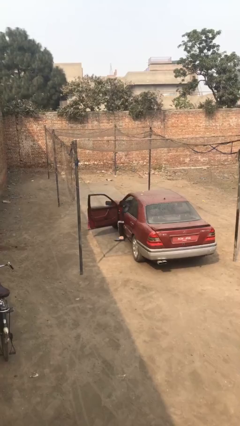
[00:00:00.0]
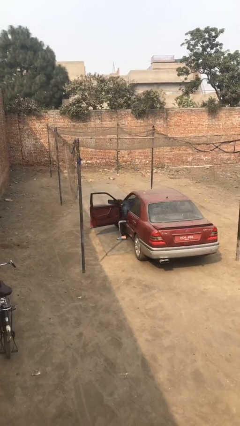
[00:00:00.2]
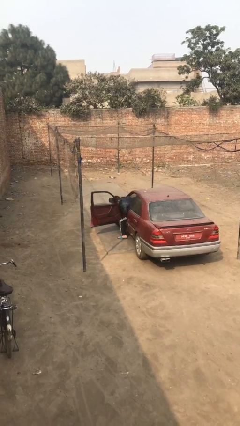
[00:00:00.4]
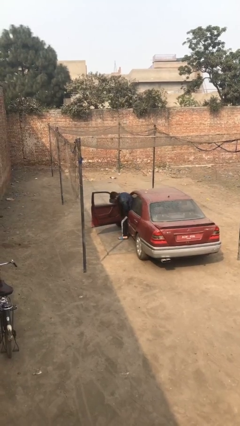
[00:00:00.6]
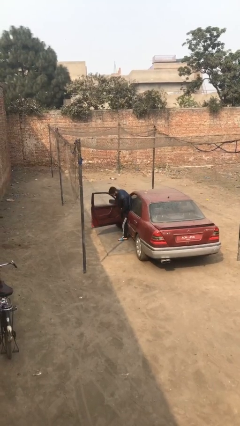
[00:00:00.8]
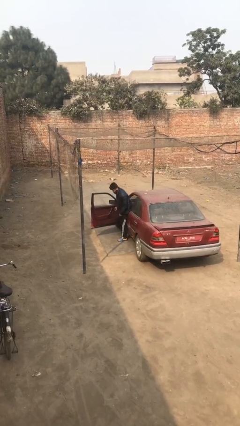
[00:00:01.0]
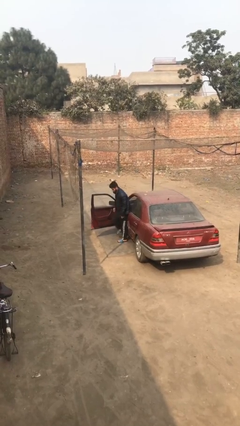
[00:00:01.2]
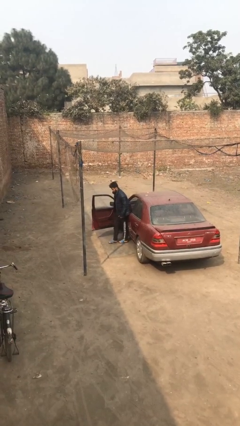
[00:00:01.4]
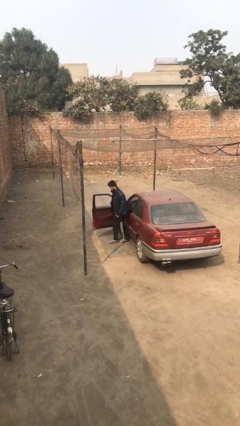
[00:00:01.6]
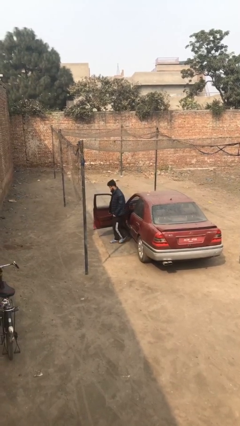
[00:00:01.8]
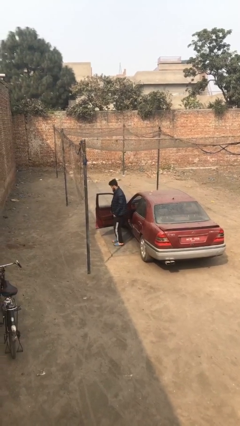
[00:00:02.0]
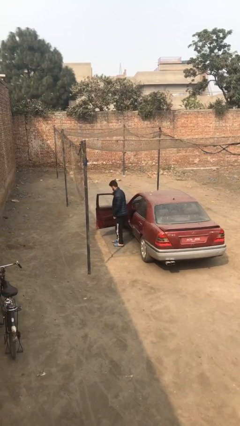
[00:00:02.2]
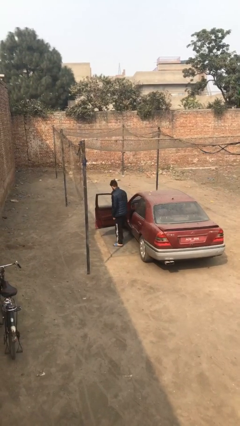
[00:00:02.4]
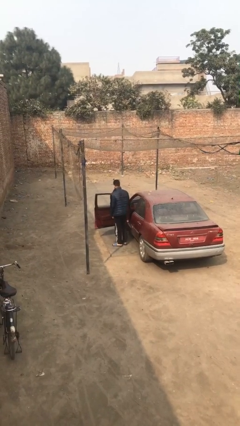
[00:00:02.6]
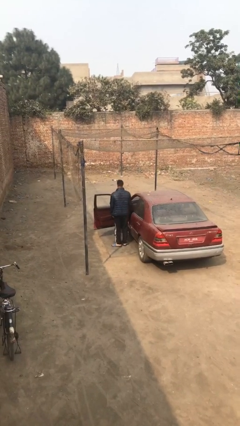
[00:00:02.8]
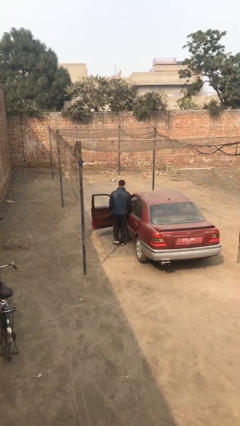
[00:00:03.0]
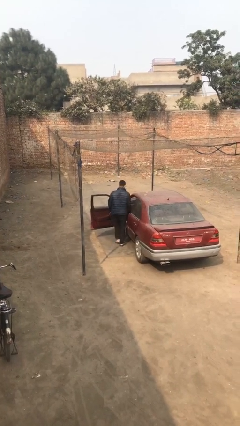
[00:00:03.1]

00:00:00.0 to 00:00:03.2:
person exits car

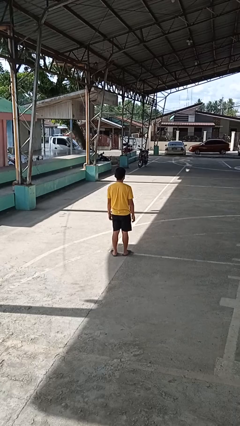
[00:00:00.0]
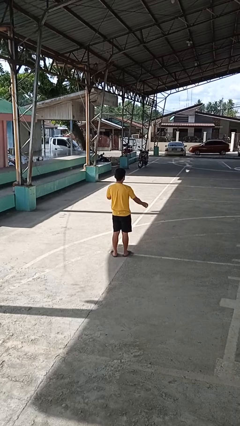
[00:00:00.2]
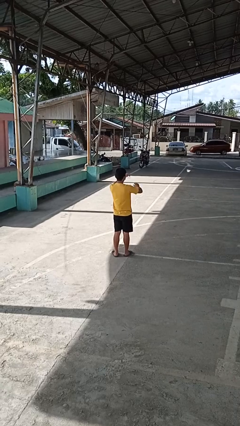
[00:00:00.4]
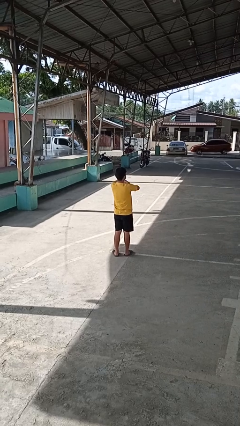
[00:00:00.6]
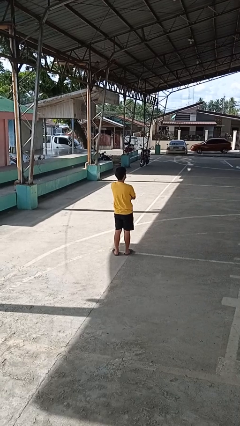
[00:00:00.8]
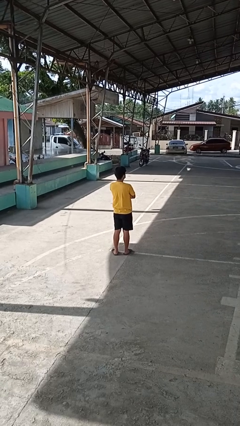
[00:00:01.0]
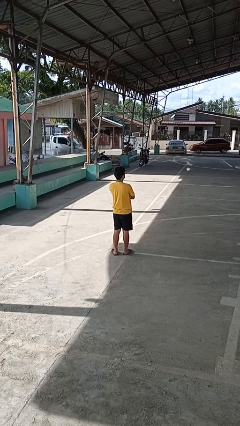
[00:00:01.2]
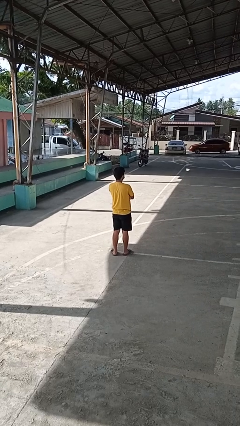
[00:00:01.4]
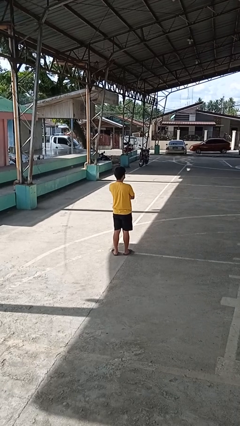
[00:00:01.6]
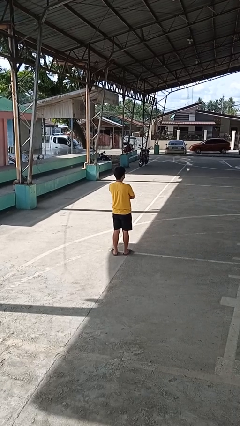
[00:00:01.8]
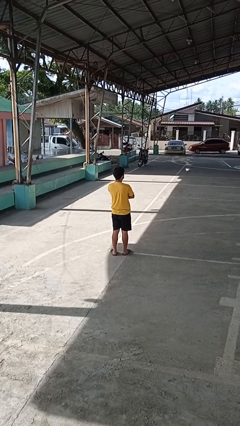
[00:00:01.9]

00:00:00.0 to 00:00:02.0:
person crosses arms

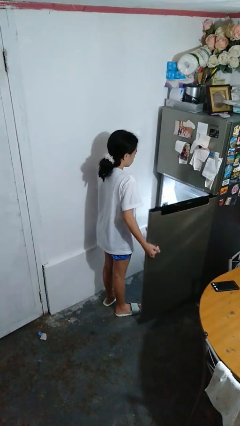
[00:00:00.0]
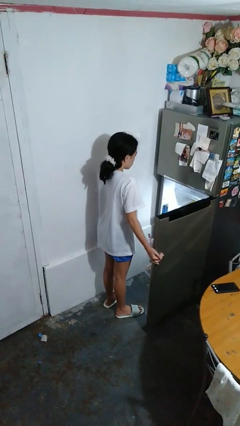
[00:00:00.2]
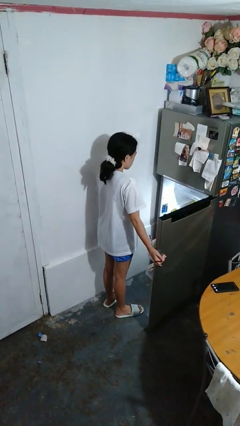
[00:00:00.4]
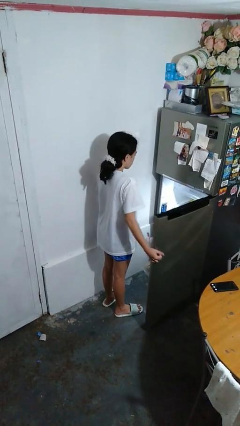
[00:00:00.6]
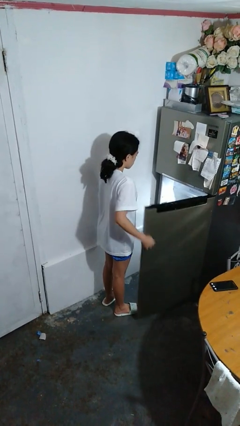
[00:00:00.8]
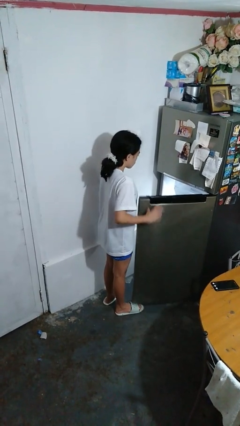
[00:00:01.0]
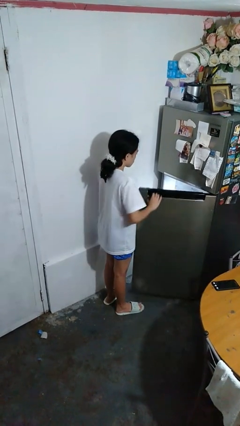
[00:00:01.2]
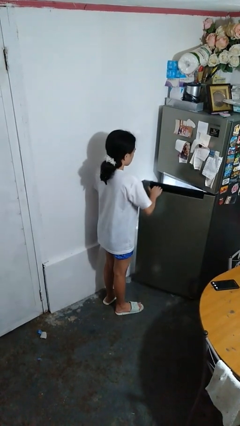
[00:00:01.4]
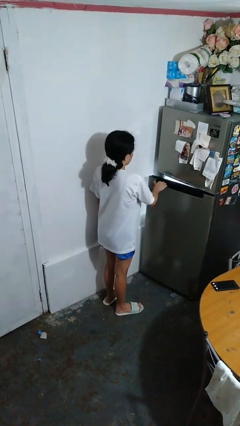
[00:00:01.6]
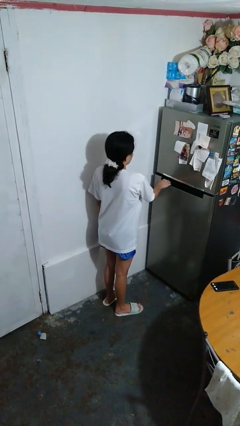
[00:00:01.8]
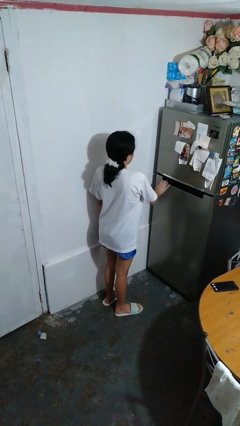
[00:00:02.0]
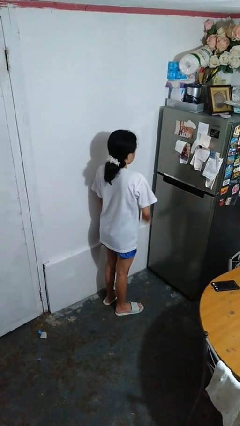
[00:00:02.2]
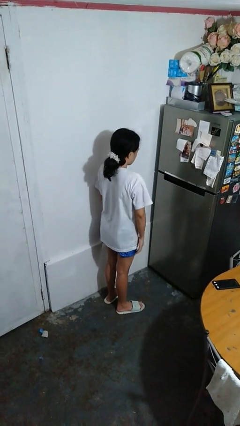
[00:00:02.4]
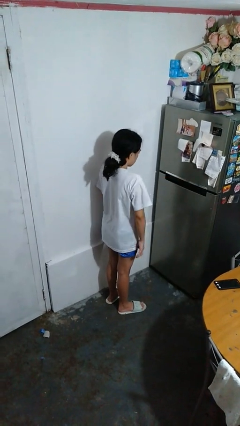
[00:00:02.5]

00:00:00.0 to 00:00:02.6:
person closes refrigerator

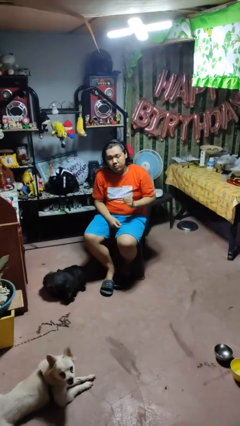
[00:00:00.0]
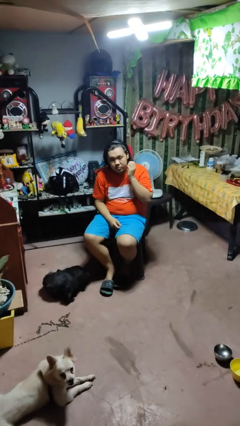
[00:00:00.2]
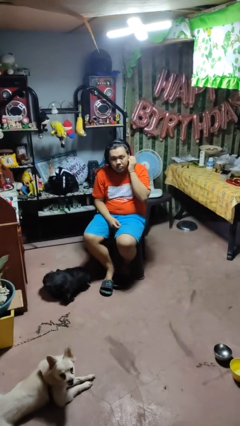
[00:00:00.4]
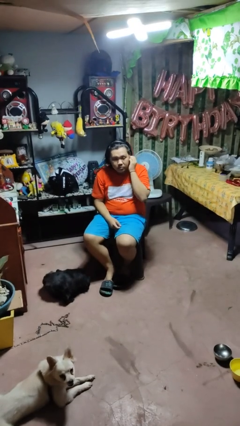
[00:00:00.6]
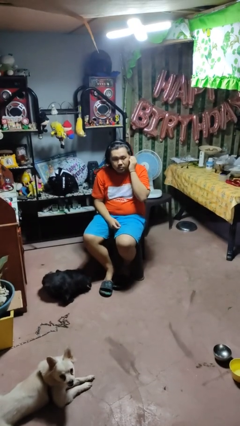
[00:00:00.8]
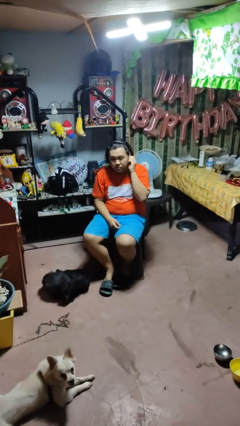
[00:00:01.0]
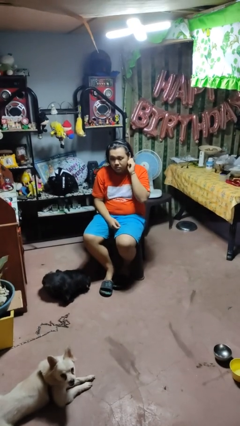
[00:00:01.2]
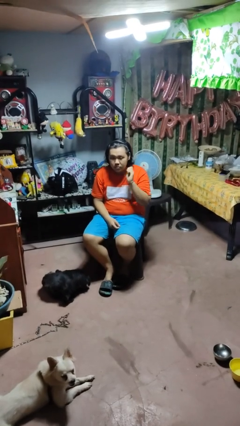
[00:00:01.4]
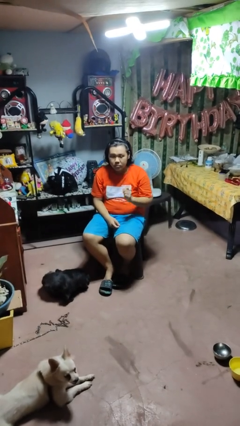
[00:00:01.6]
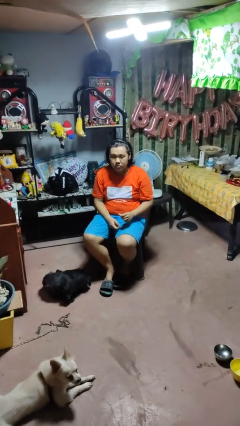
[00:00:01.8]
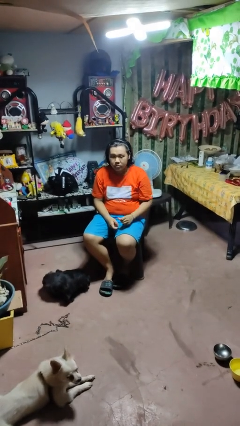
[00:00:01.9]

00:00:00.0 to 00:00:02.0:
person takes off earrings

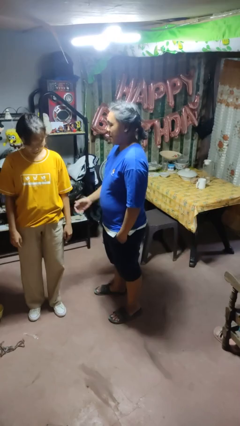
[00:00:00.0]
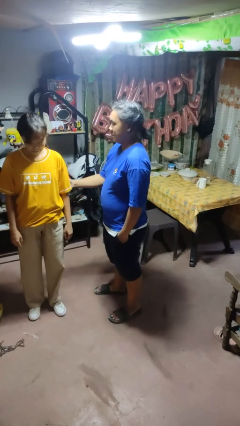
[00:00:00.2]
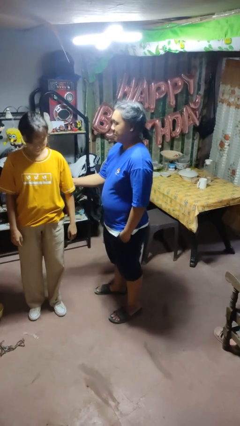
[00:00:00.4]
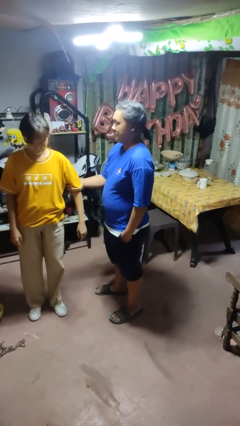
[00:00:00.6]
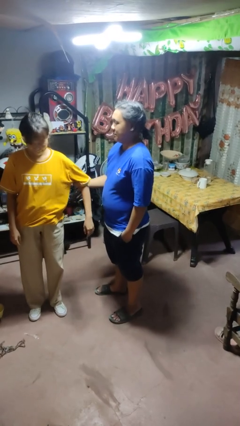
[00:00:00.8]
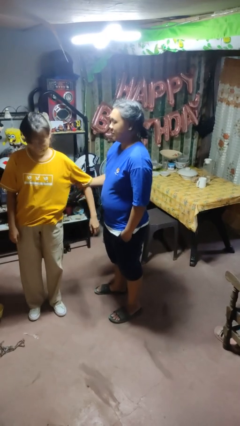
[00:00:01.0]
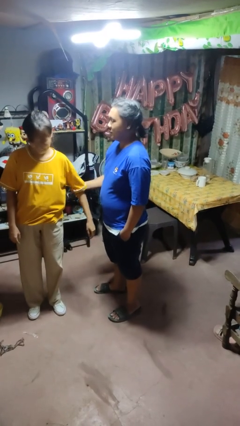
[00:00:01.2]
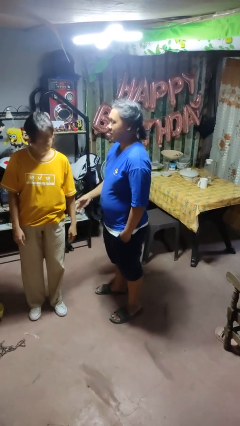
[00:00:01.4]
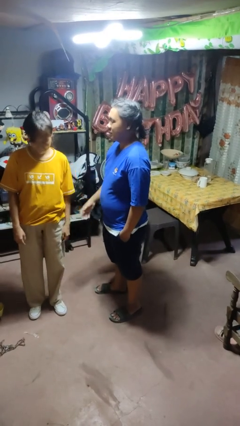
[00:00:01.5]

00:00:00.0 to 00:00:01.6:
person grabs person by bicep

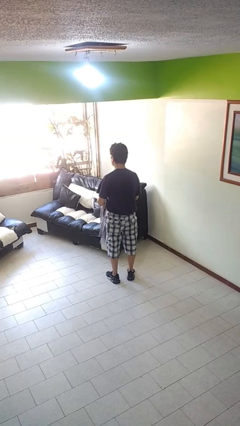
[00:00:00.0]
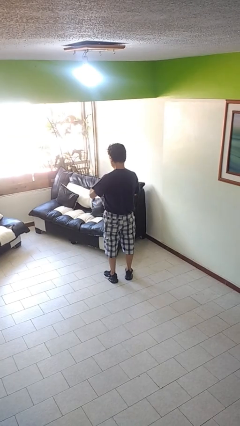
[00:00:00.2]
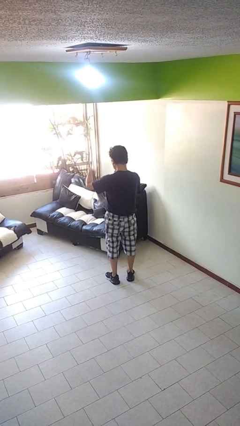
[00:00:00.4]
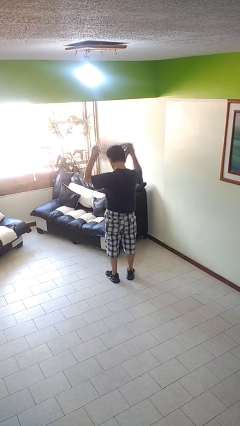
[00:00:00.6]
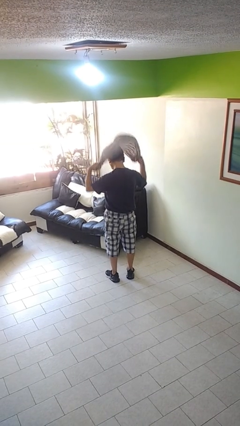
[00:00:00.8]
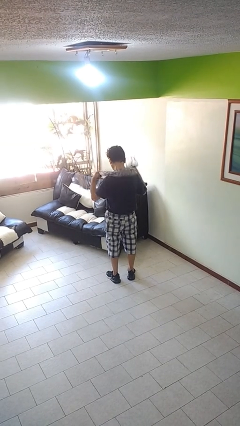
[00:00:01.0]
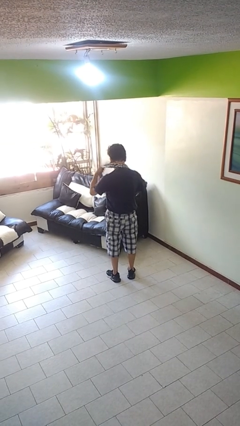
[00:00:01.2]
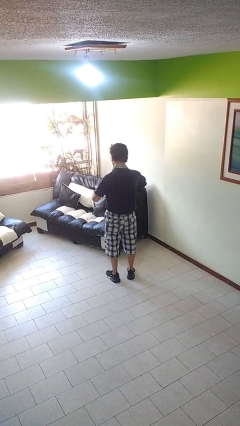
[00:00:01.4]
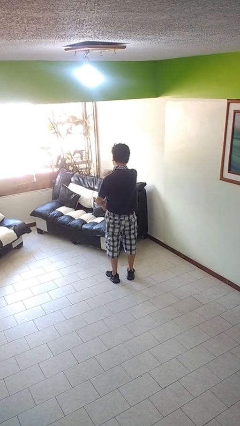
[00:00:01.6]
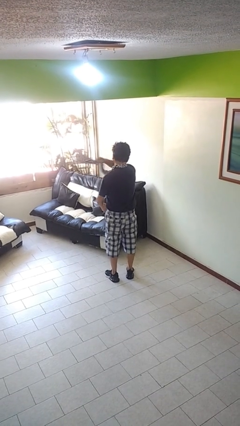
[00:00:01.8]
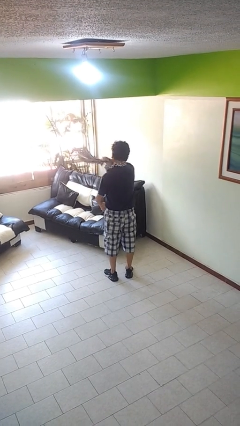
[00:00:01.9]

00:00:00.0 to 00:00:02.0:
person puts on scarf

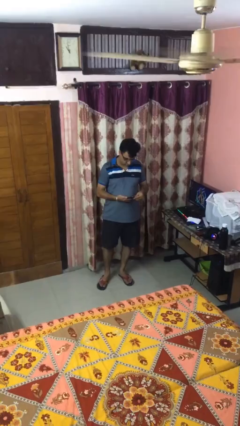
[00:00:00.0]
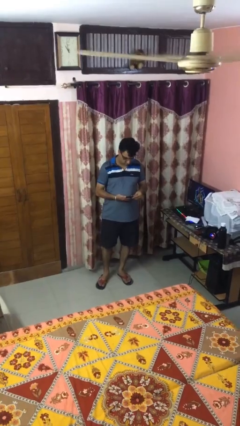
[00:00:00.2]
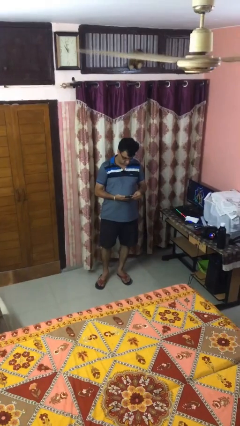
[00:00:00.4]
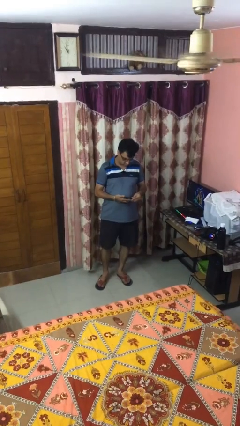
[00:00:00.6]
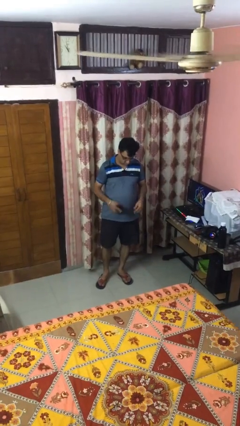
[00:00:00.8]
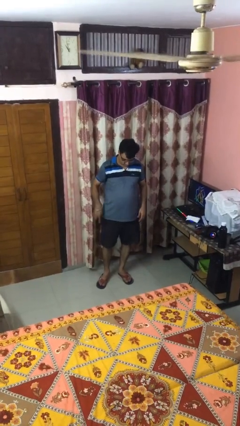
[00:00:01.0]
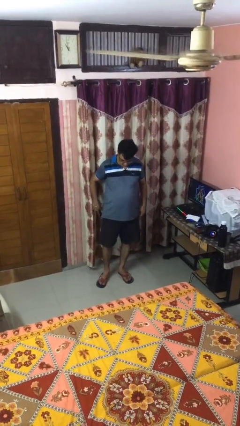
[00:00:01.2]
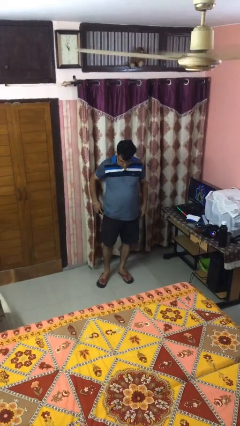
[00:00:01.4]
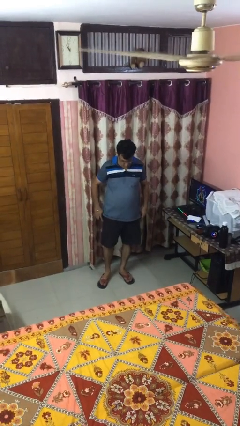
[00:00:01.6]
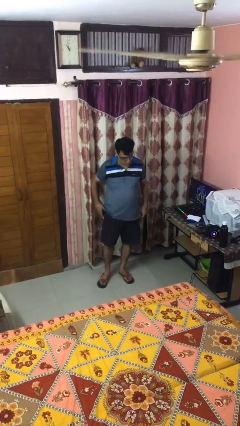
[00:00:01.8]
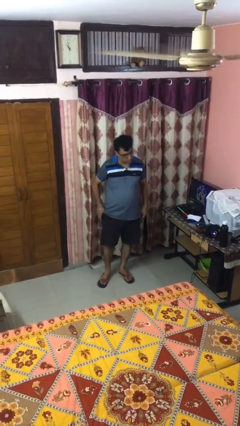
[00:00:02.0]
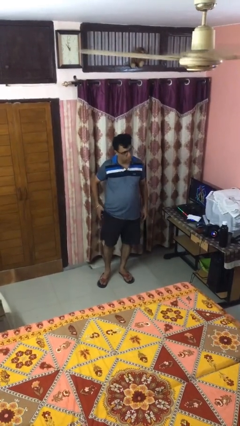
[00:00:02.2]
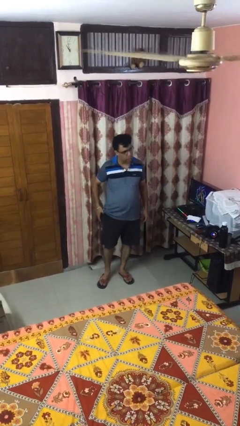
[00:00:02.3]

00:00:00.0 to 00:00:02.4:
person puts phone into pocket

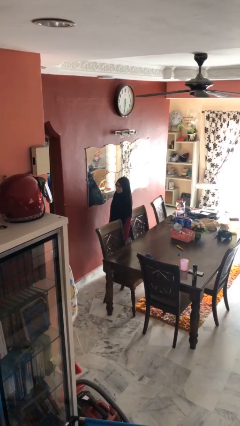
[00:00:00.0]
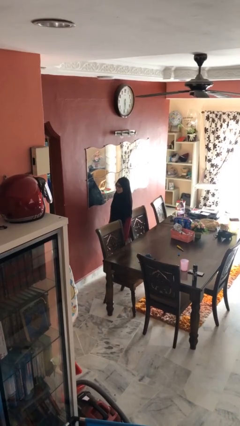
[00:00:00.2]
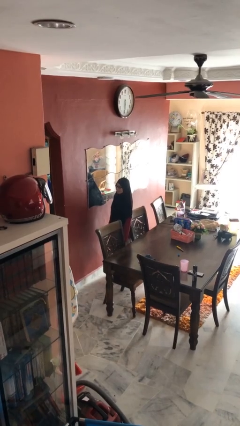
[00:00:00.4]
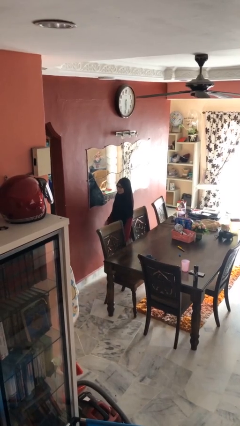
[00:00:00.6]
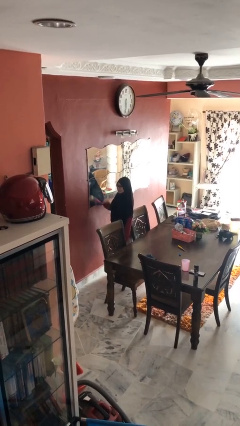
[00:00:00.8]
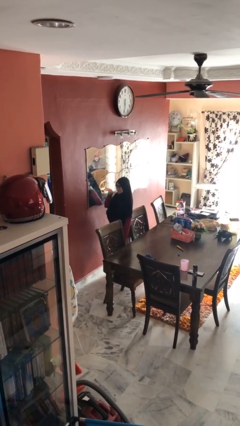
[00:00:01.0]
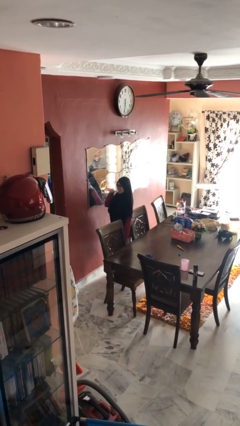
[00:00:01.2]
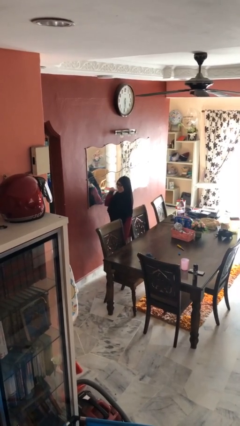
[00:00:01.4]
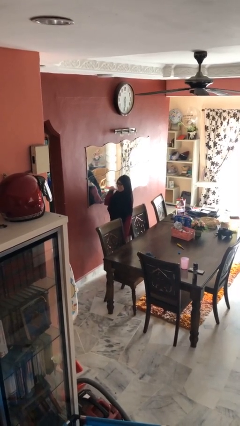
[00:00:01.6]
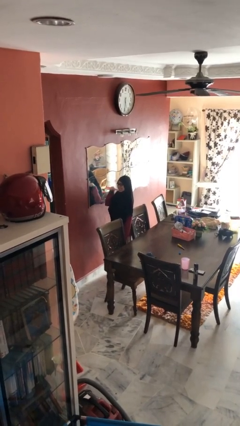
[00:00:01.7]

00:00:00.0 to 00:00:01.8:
person brushes teeth
